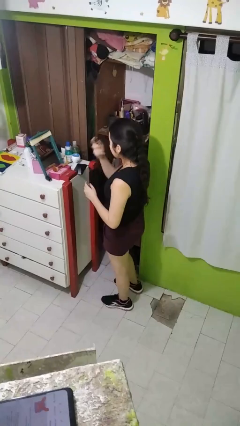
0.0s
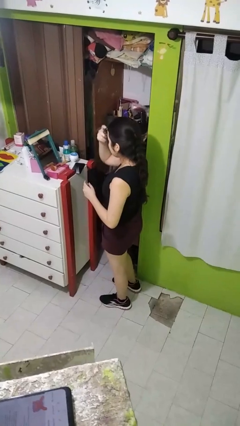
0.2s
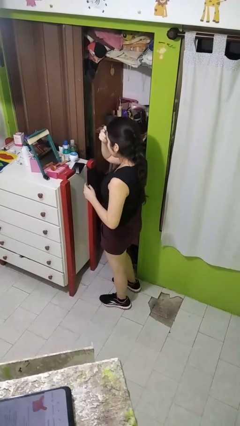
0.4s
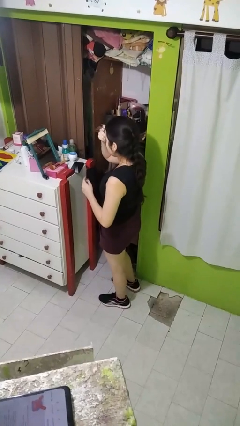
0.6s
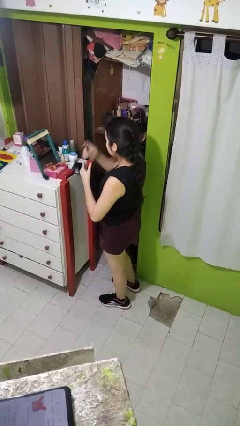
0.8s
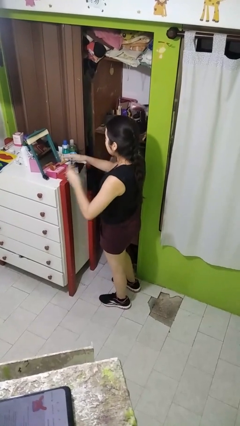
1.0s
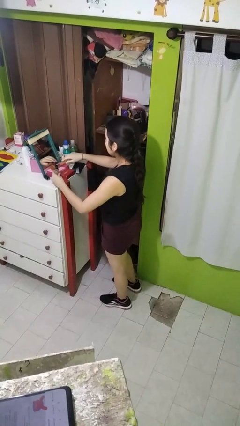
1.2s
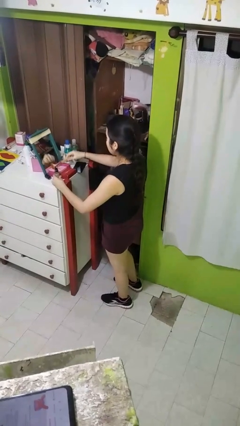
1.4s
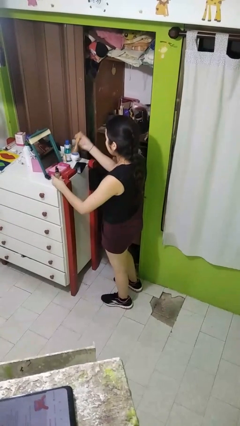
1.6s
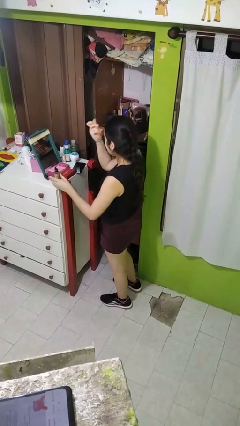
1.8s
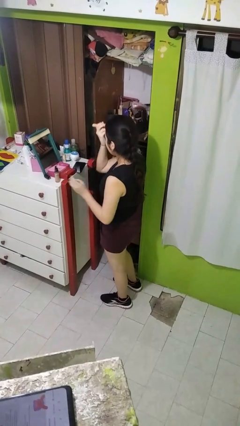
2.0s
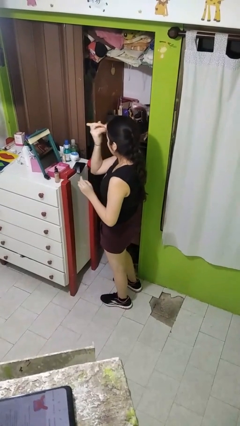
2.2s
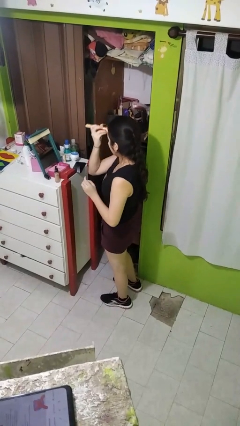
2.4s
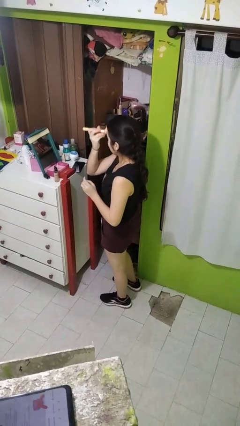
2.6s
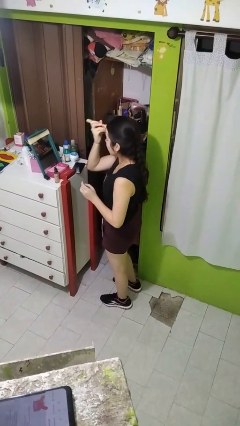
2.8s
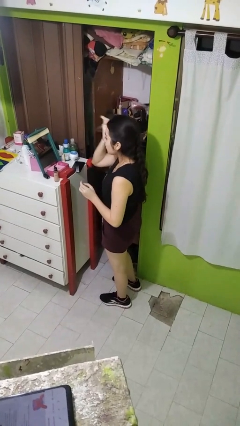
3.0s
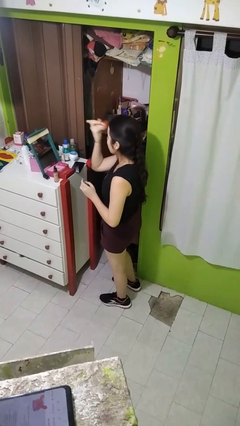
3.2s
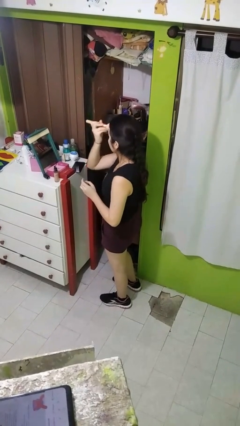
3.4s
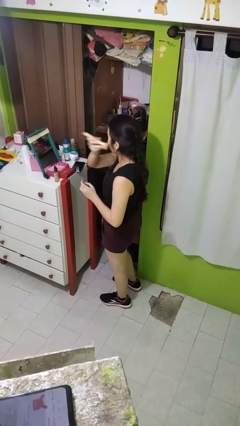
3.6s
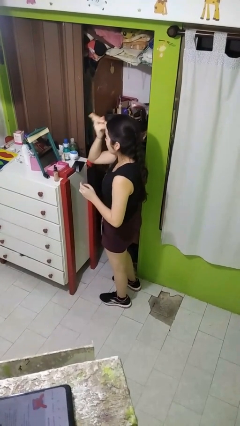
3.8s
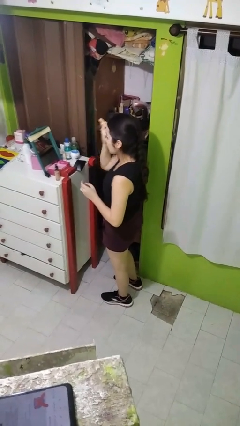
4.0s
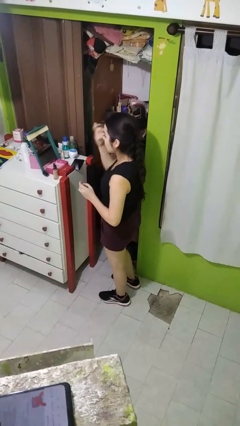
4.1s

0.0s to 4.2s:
person applies foundation makeup

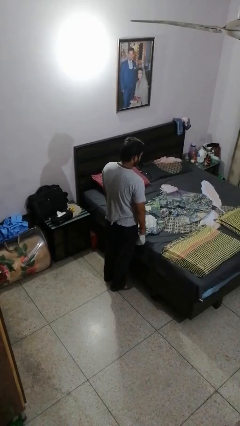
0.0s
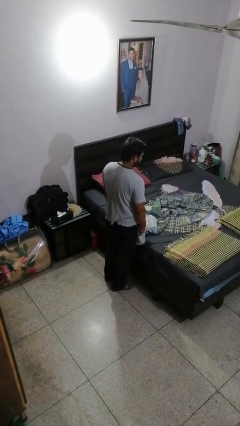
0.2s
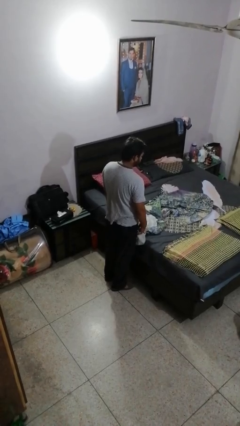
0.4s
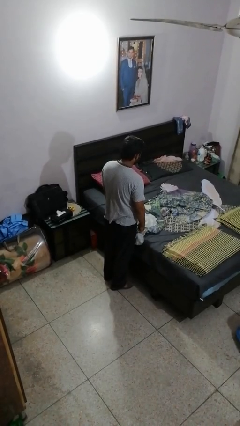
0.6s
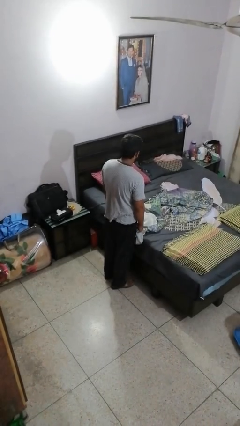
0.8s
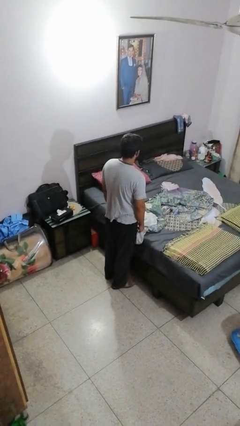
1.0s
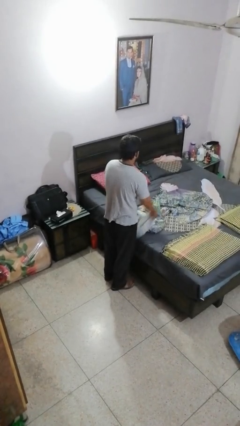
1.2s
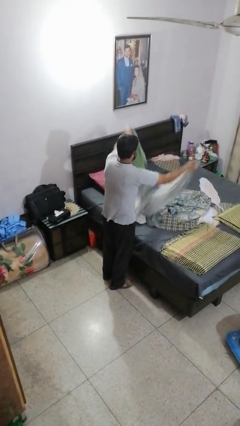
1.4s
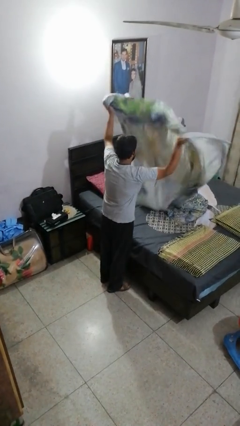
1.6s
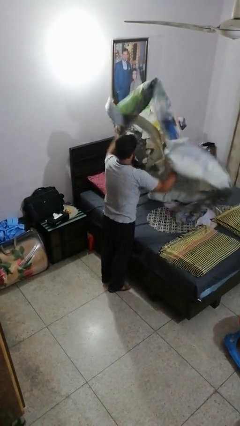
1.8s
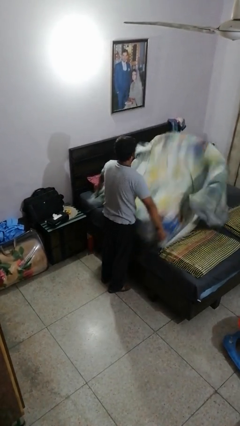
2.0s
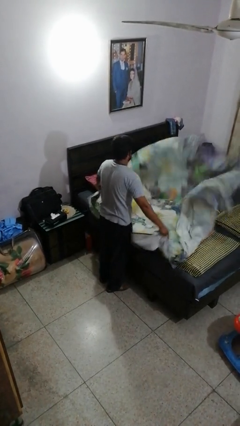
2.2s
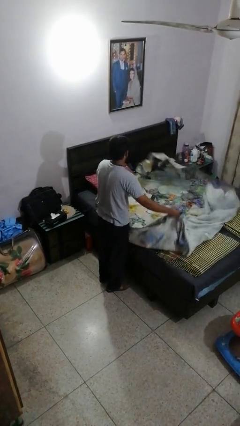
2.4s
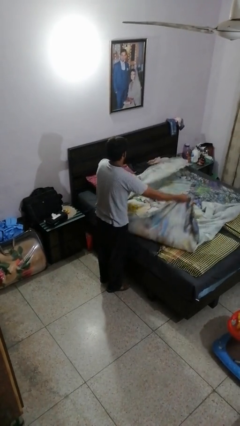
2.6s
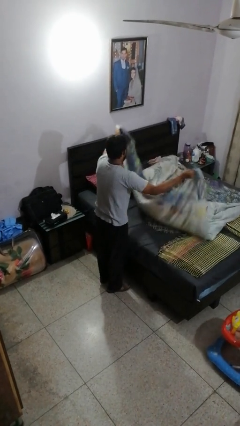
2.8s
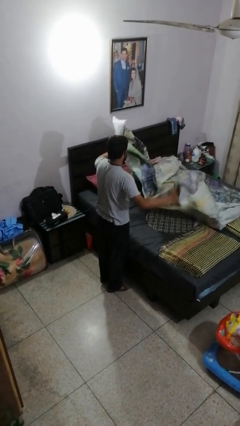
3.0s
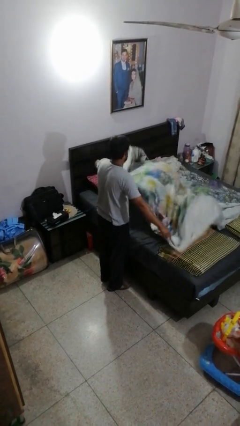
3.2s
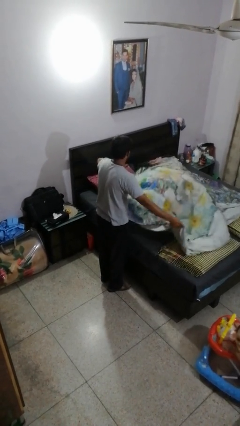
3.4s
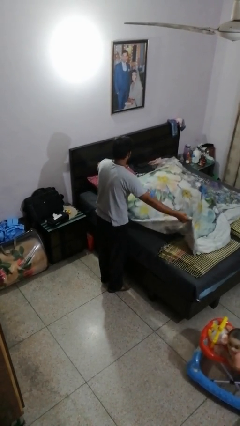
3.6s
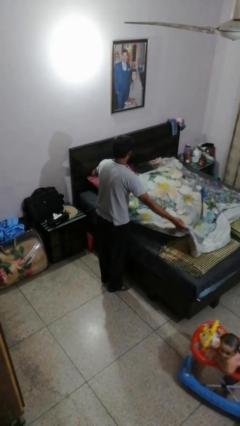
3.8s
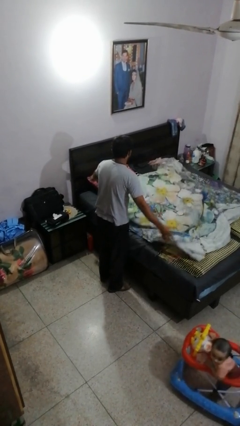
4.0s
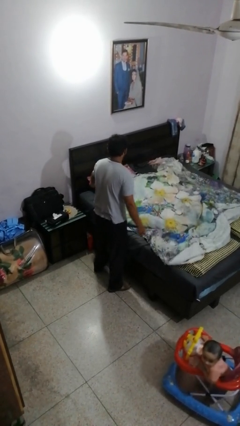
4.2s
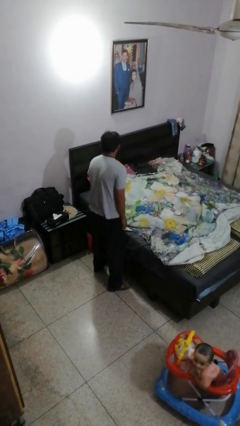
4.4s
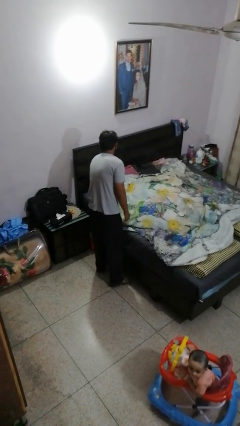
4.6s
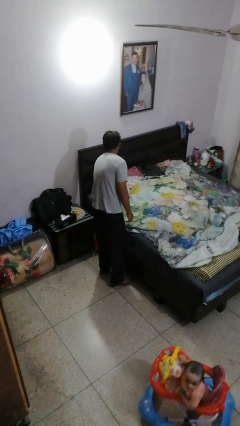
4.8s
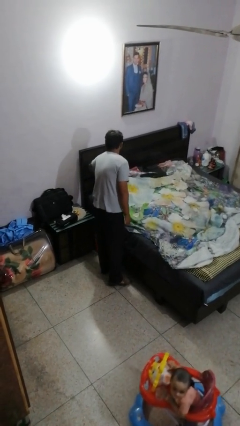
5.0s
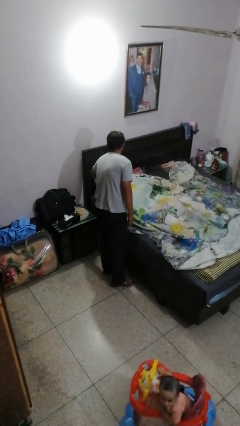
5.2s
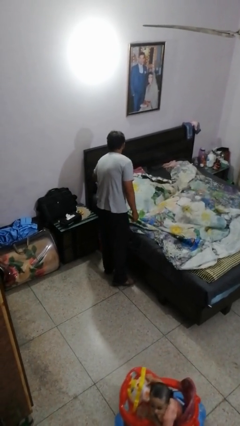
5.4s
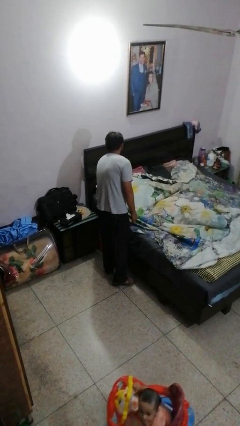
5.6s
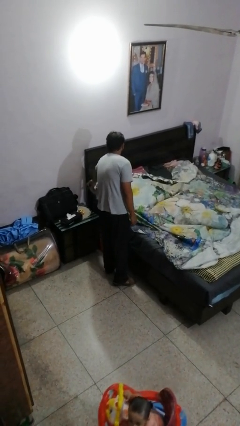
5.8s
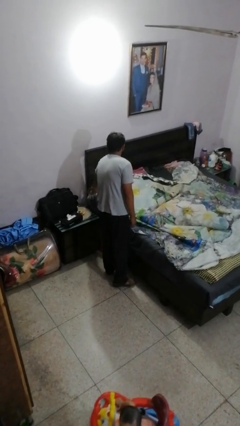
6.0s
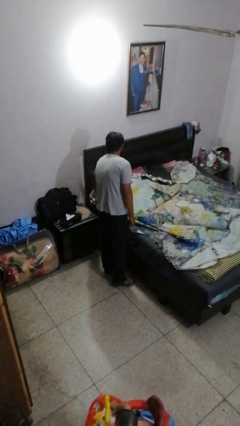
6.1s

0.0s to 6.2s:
person makes bed

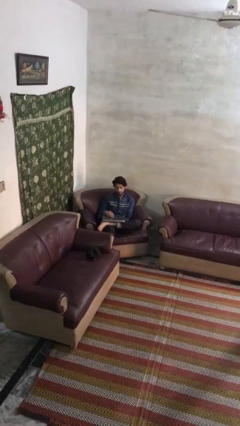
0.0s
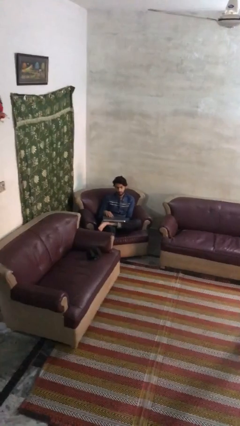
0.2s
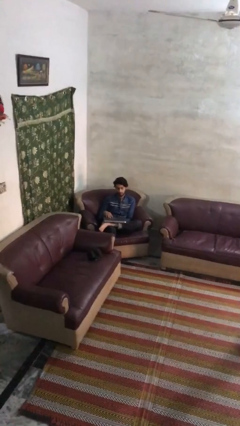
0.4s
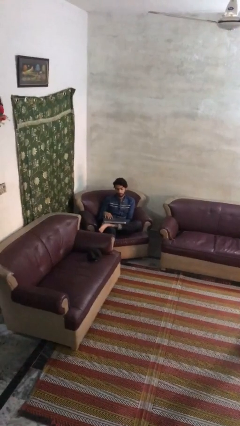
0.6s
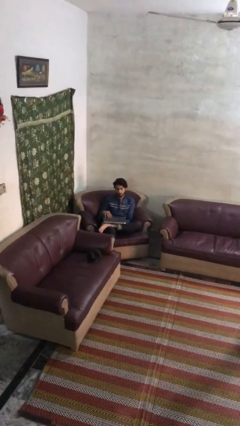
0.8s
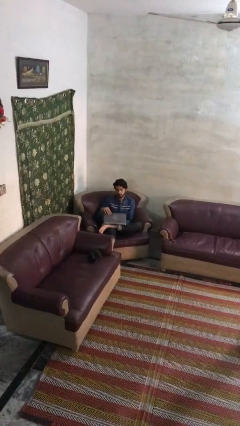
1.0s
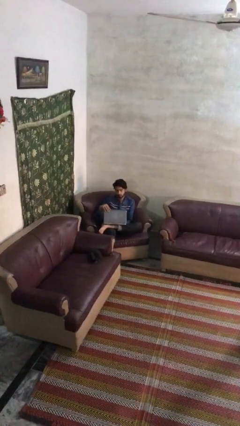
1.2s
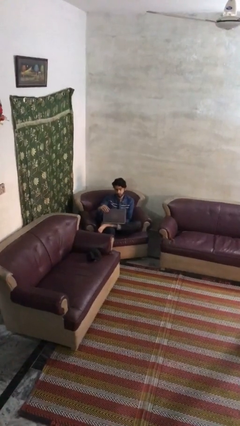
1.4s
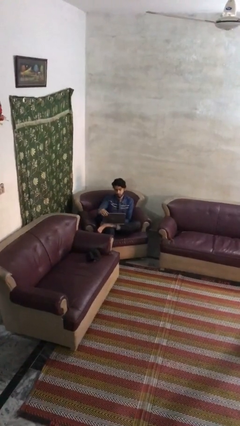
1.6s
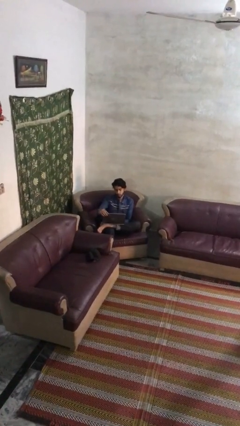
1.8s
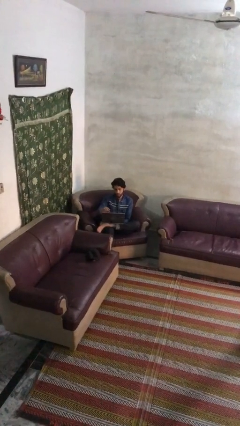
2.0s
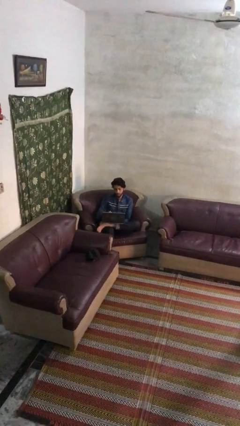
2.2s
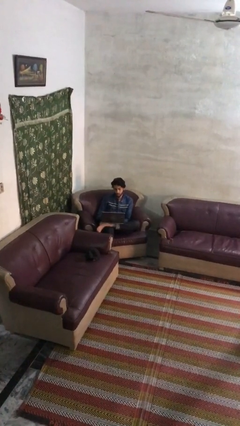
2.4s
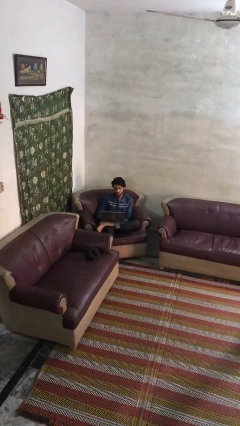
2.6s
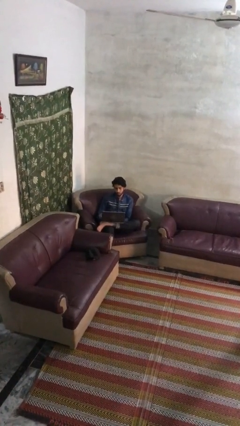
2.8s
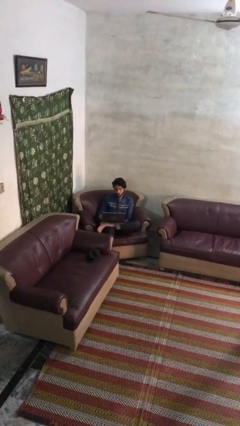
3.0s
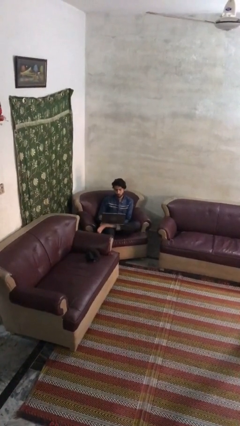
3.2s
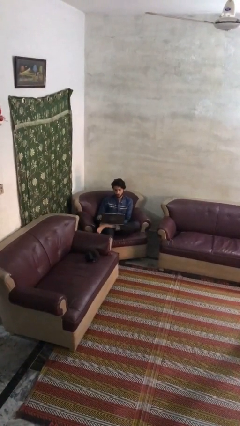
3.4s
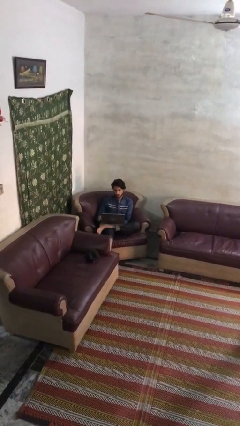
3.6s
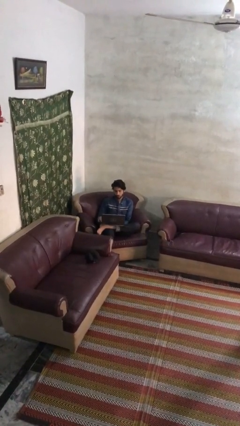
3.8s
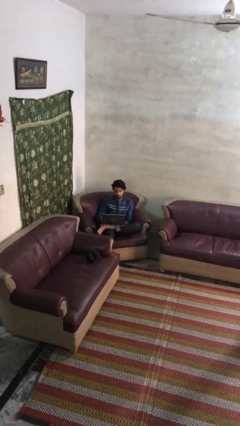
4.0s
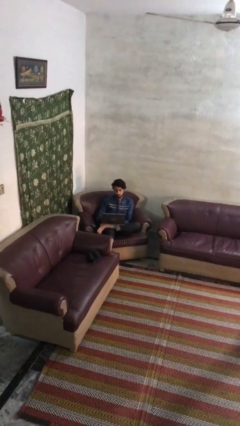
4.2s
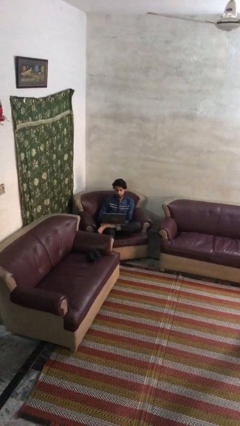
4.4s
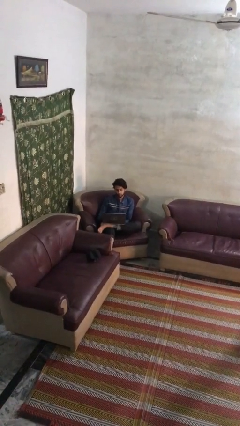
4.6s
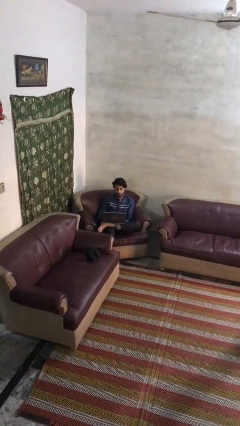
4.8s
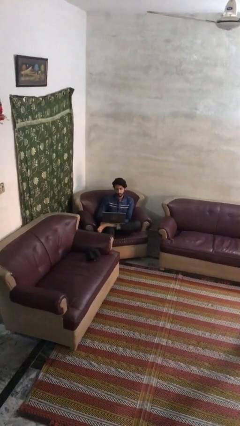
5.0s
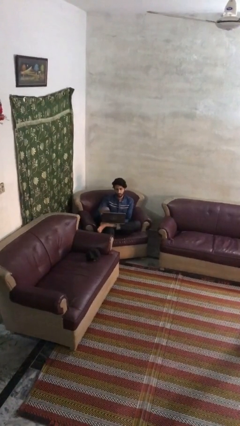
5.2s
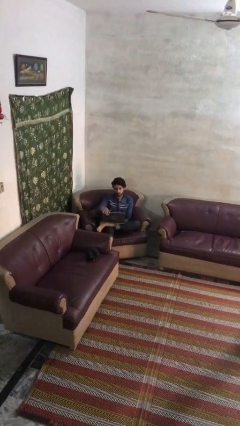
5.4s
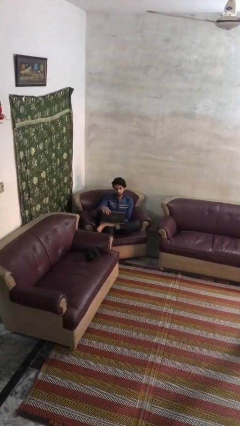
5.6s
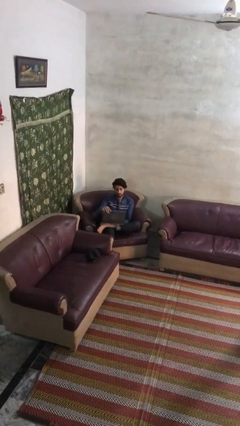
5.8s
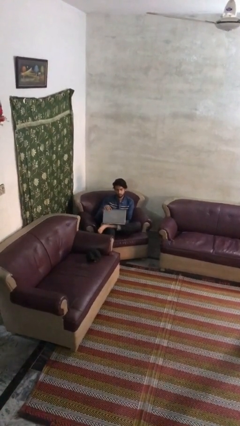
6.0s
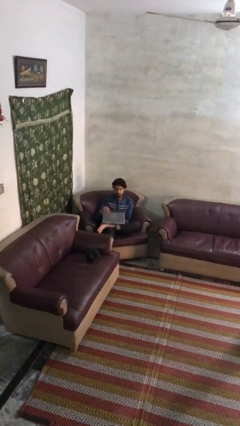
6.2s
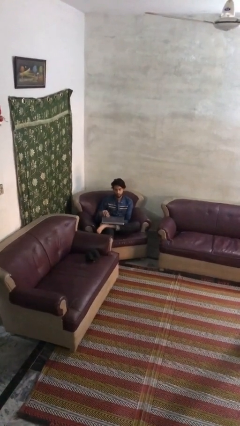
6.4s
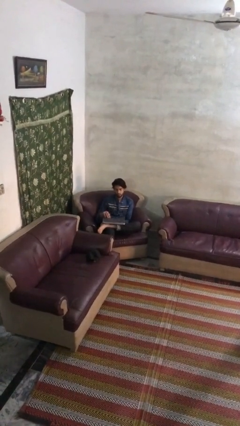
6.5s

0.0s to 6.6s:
person interacts with laptop

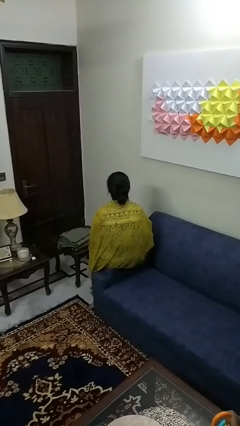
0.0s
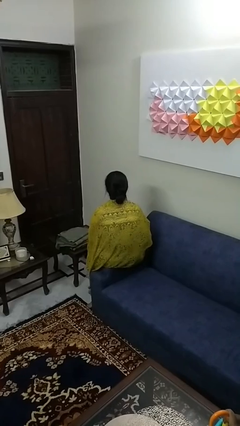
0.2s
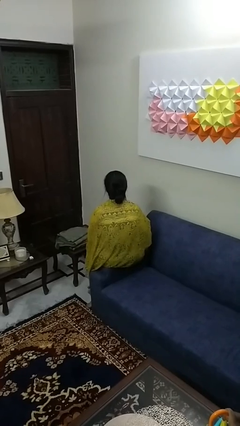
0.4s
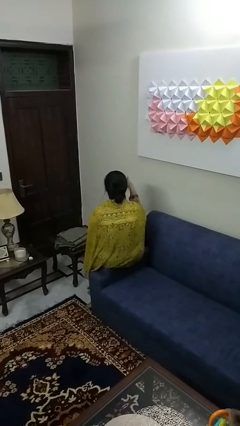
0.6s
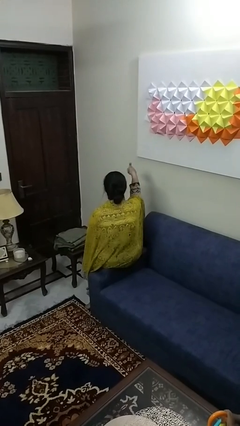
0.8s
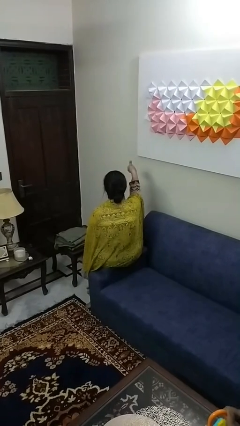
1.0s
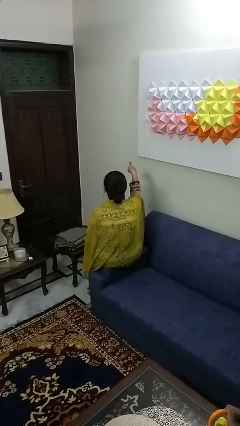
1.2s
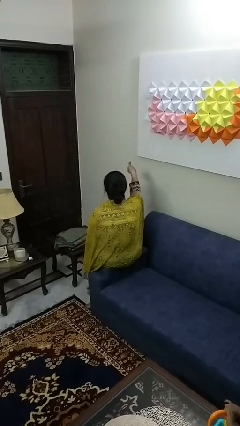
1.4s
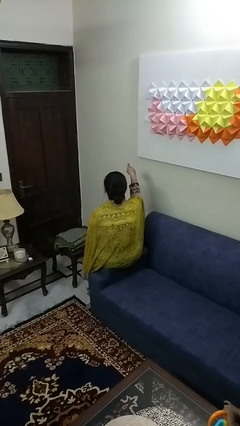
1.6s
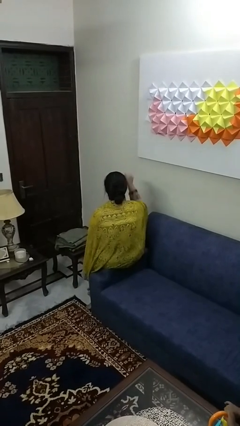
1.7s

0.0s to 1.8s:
person gestures thumbs up
